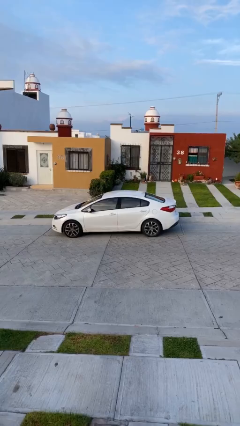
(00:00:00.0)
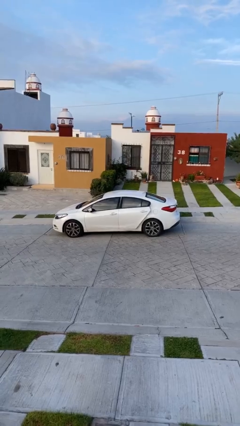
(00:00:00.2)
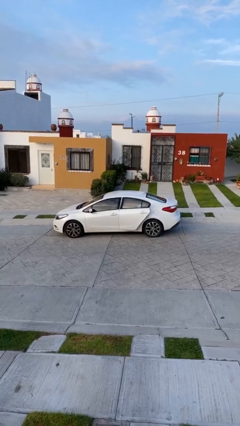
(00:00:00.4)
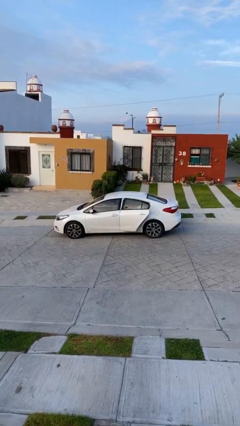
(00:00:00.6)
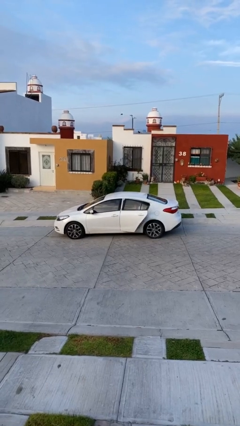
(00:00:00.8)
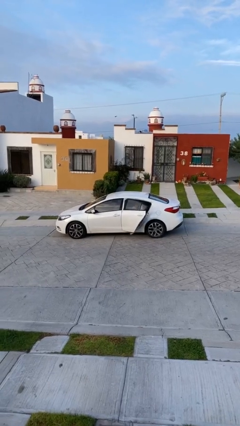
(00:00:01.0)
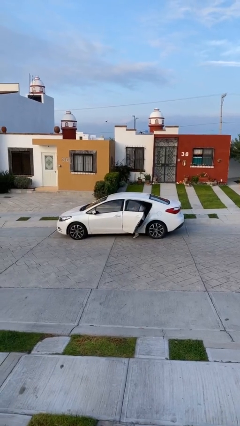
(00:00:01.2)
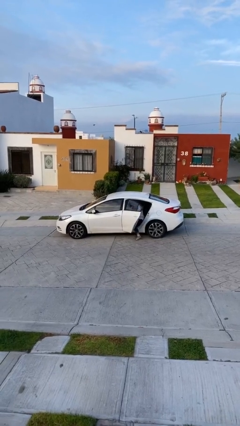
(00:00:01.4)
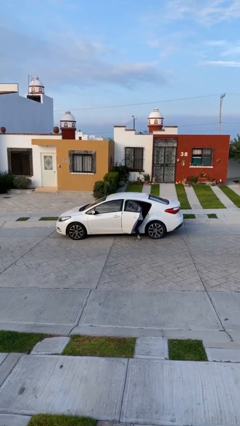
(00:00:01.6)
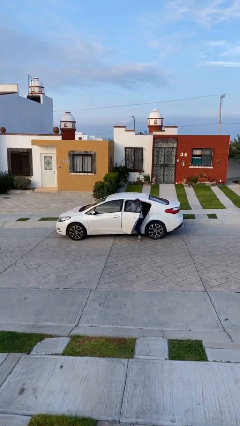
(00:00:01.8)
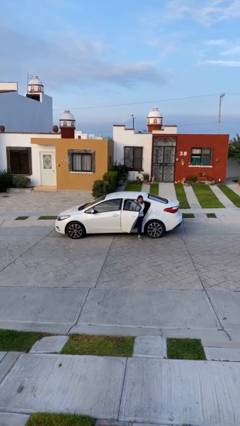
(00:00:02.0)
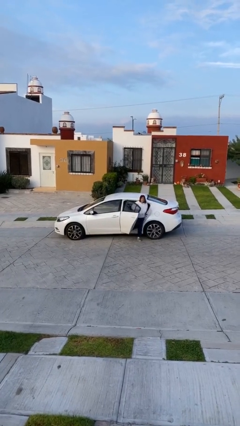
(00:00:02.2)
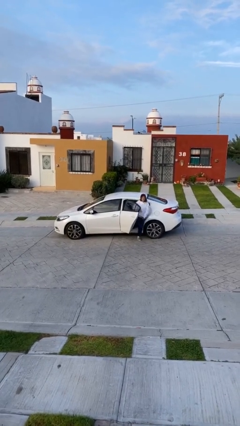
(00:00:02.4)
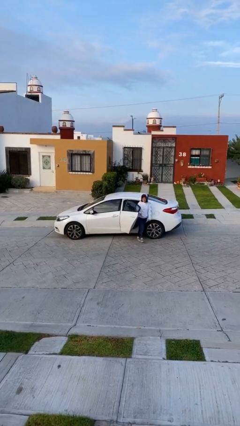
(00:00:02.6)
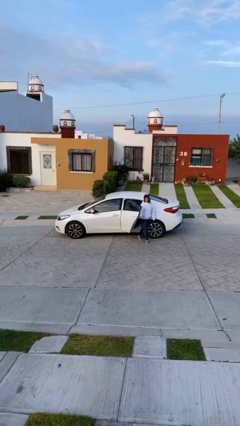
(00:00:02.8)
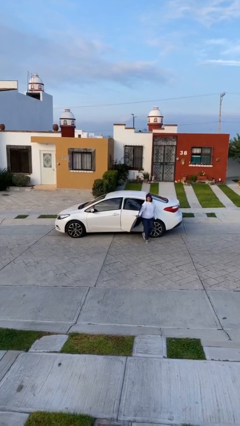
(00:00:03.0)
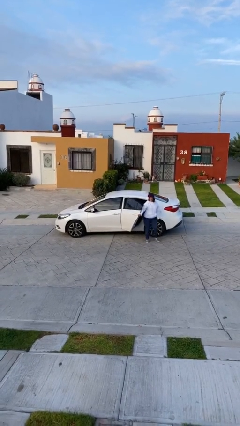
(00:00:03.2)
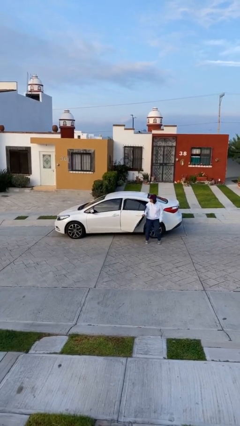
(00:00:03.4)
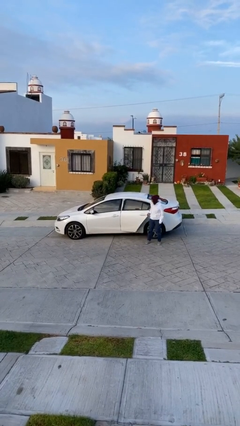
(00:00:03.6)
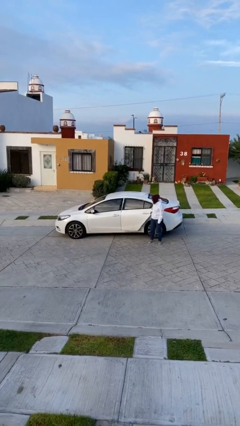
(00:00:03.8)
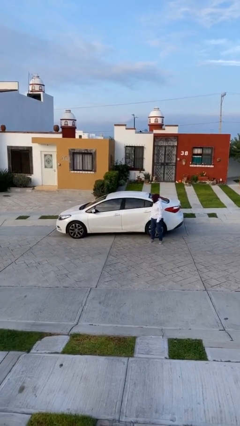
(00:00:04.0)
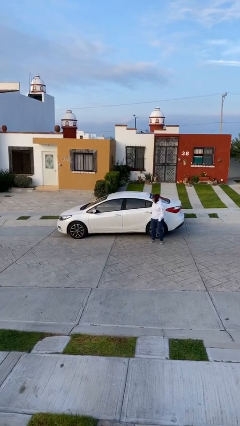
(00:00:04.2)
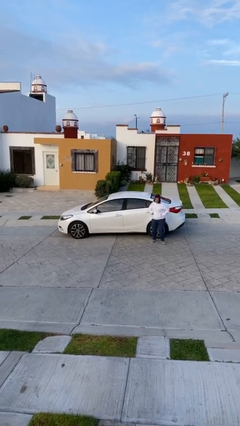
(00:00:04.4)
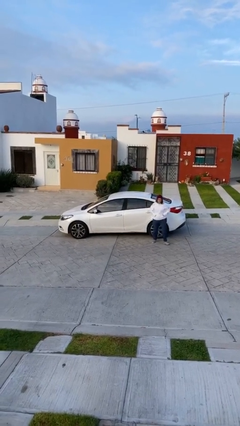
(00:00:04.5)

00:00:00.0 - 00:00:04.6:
car drops off person

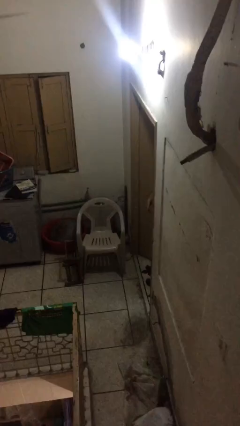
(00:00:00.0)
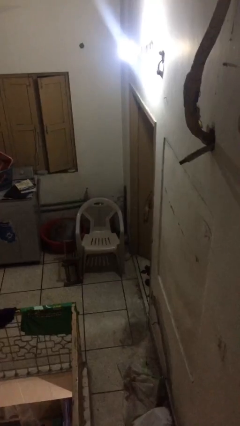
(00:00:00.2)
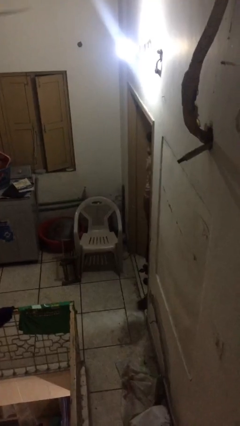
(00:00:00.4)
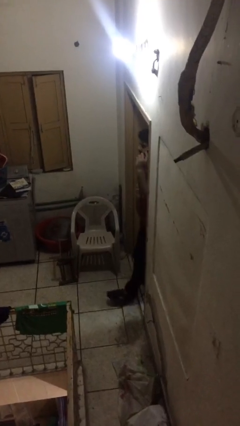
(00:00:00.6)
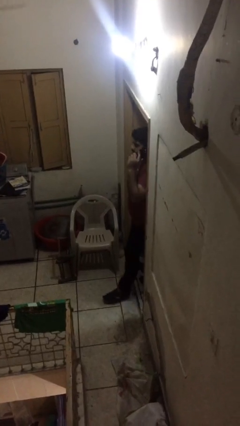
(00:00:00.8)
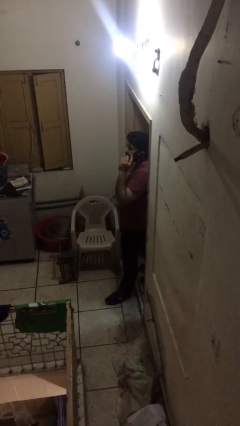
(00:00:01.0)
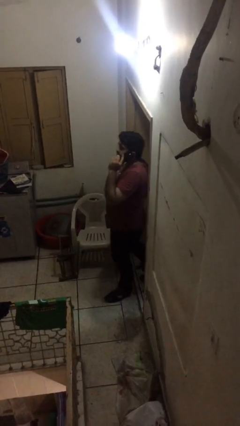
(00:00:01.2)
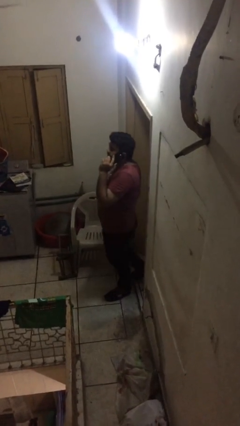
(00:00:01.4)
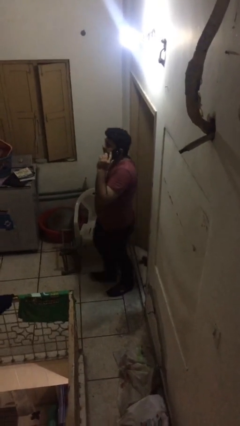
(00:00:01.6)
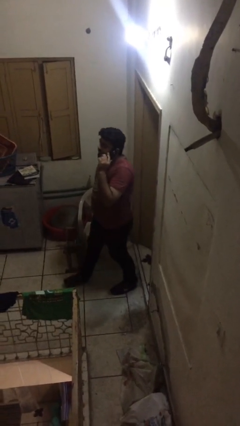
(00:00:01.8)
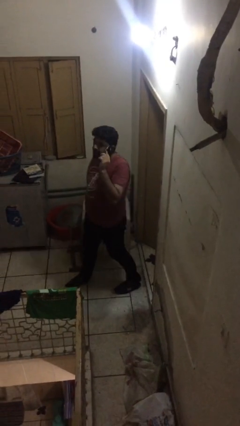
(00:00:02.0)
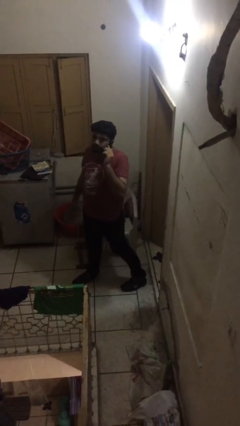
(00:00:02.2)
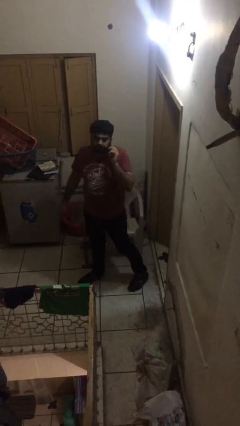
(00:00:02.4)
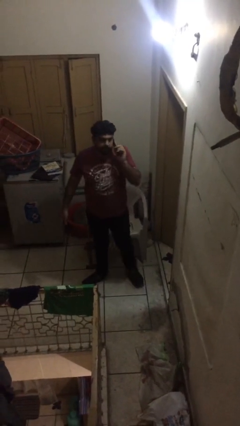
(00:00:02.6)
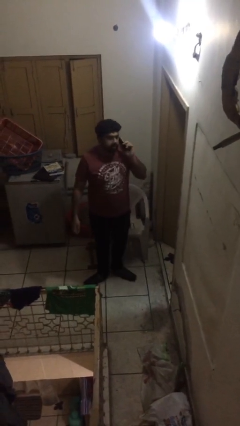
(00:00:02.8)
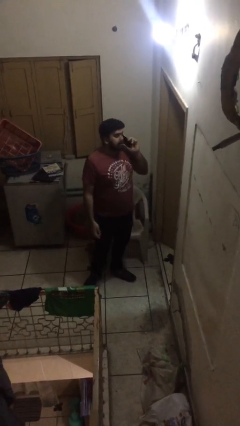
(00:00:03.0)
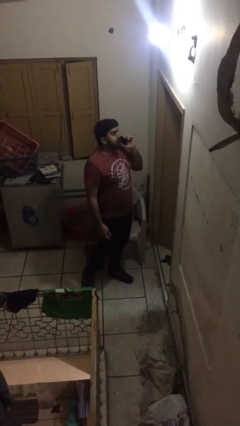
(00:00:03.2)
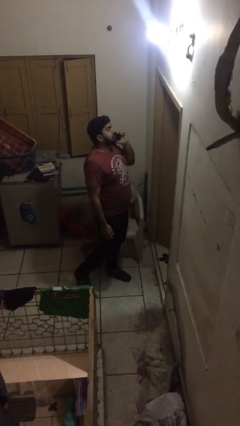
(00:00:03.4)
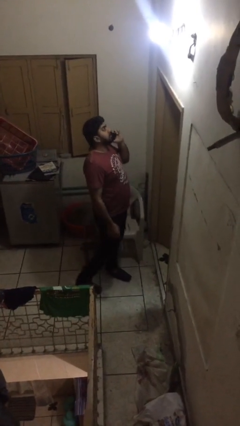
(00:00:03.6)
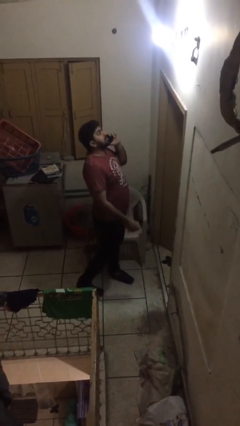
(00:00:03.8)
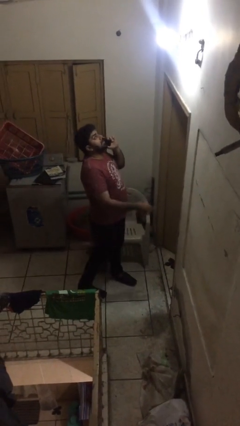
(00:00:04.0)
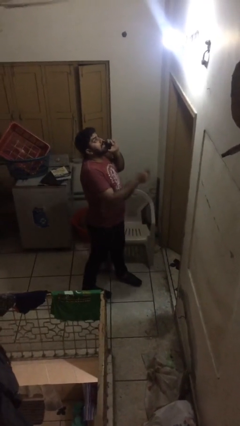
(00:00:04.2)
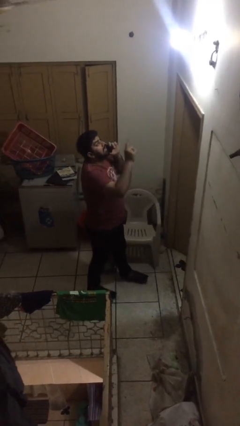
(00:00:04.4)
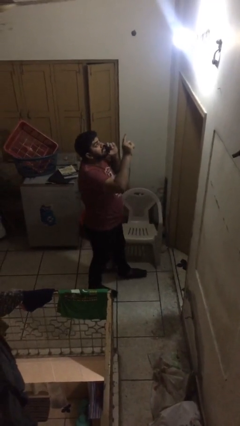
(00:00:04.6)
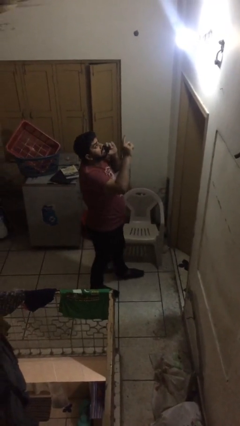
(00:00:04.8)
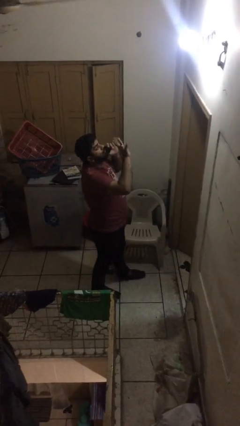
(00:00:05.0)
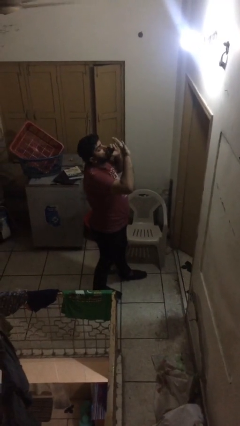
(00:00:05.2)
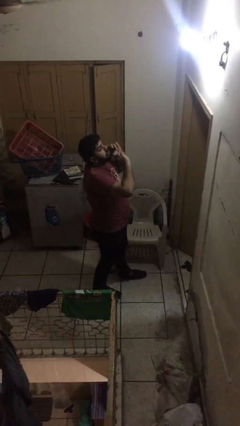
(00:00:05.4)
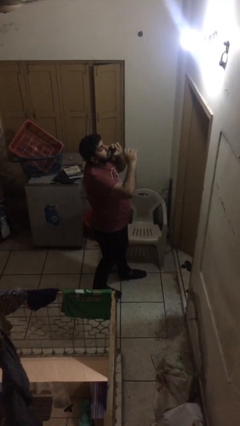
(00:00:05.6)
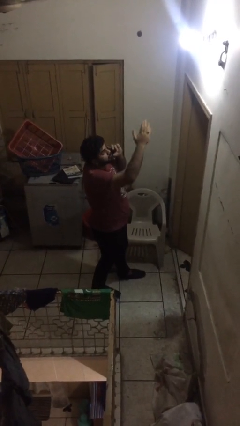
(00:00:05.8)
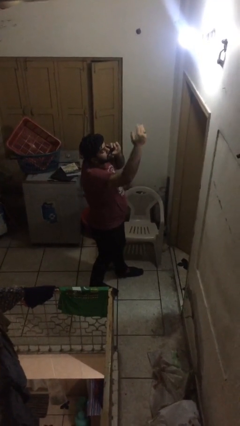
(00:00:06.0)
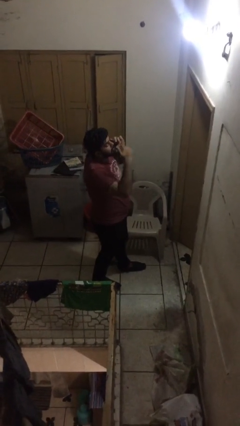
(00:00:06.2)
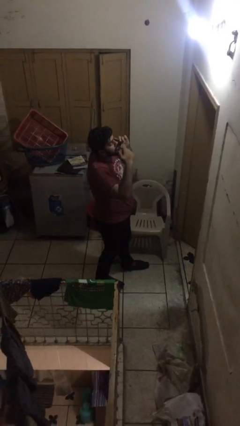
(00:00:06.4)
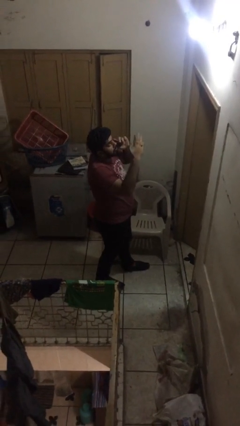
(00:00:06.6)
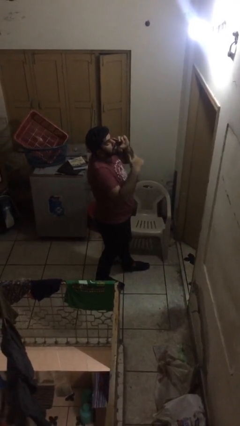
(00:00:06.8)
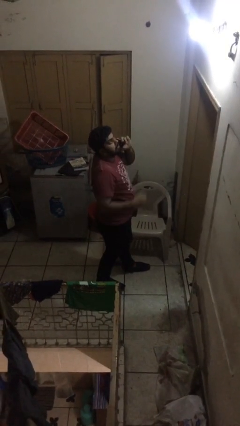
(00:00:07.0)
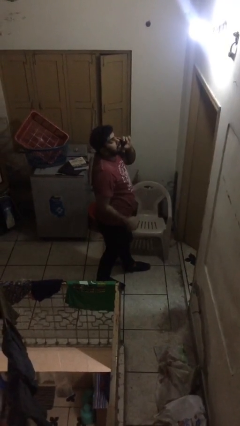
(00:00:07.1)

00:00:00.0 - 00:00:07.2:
person enters scene through structure

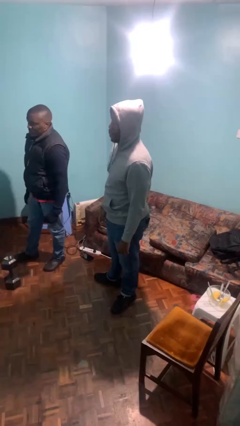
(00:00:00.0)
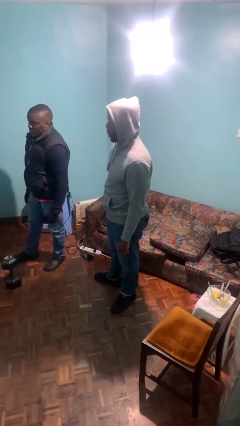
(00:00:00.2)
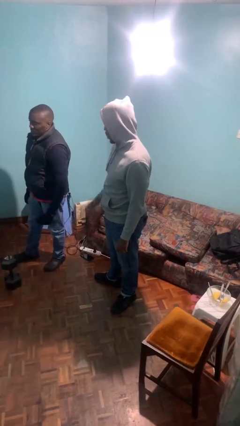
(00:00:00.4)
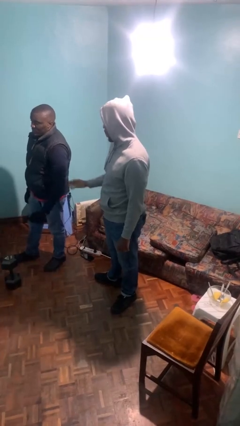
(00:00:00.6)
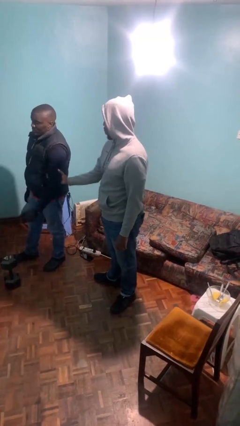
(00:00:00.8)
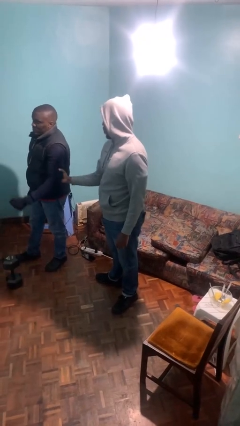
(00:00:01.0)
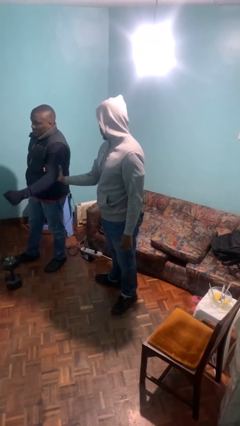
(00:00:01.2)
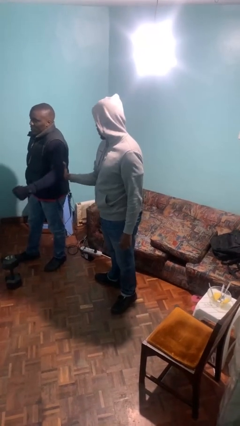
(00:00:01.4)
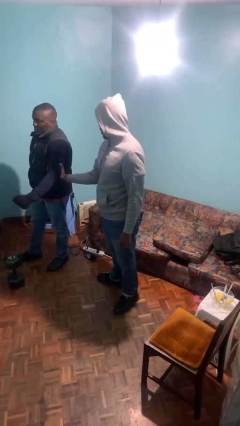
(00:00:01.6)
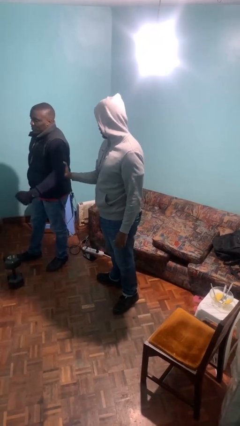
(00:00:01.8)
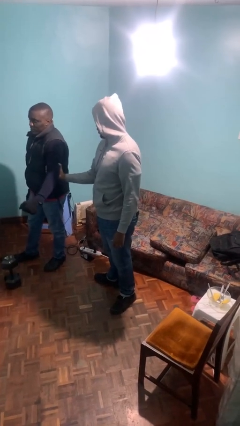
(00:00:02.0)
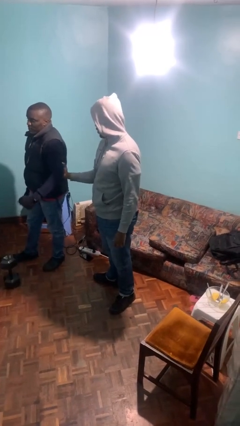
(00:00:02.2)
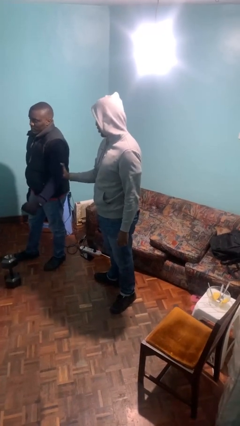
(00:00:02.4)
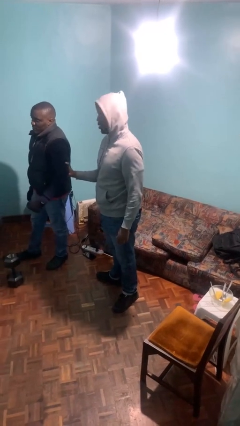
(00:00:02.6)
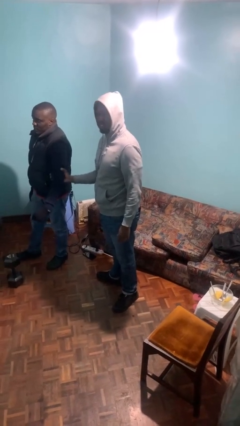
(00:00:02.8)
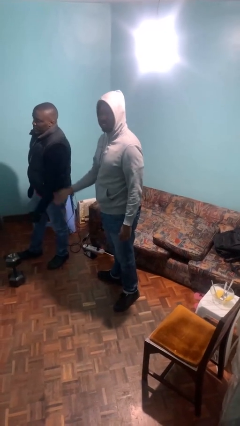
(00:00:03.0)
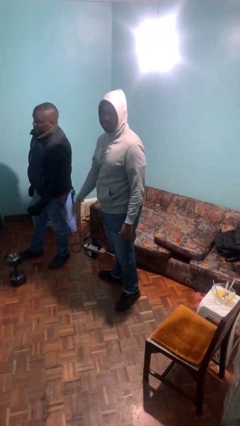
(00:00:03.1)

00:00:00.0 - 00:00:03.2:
person grabs person by bicep

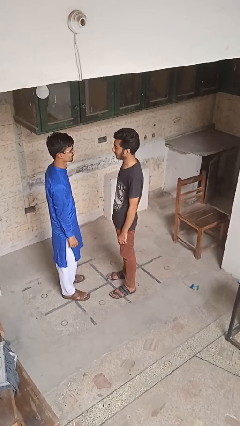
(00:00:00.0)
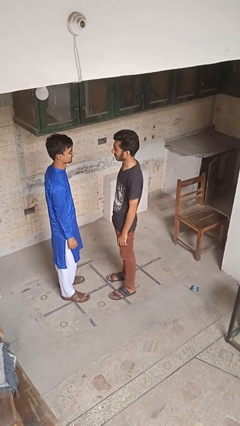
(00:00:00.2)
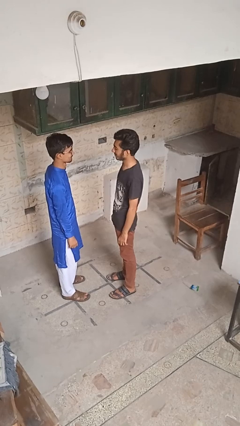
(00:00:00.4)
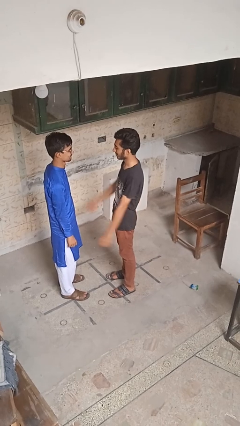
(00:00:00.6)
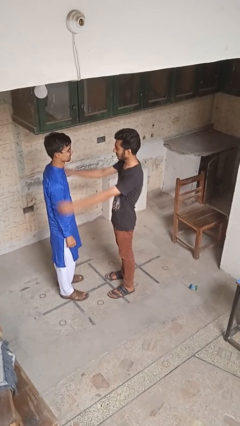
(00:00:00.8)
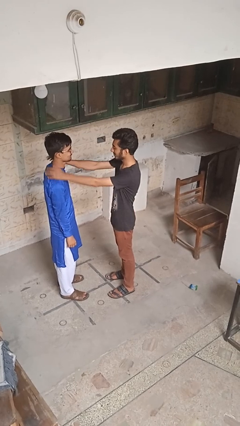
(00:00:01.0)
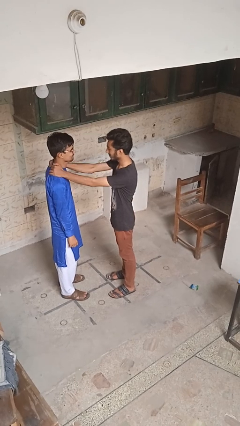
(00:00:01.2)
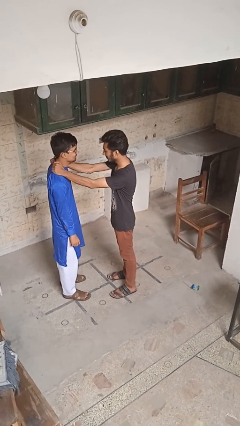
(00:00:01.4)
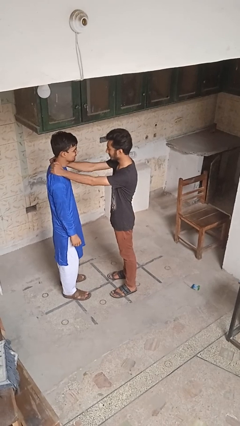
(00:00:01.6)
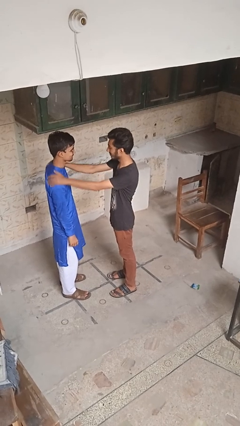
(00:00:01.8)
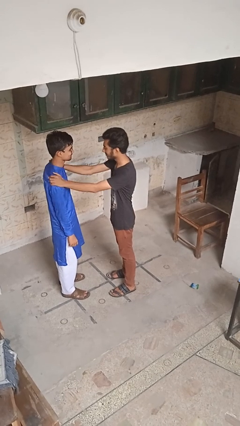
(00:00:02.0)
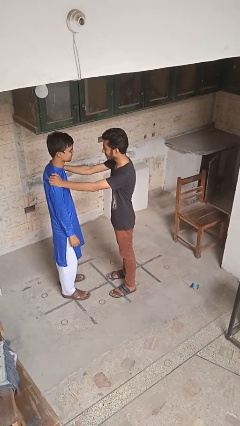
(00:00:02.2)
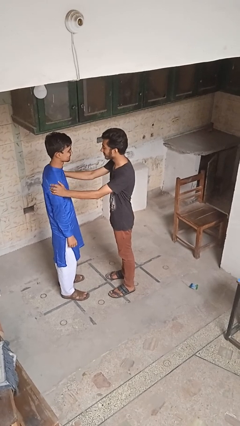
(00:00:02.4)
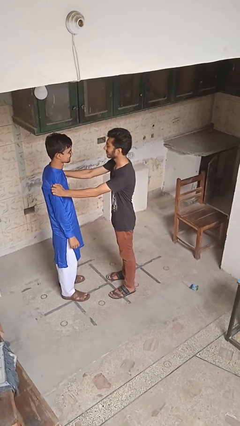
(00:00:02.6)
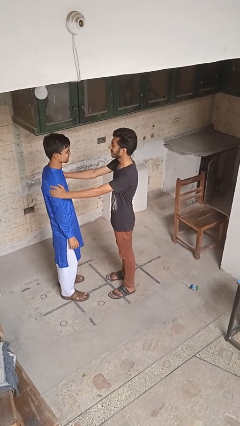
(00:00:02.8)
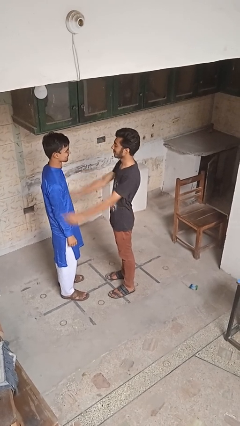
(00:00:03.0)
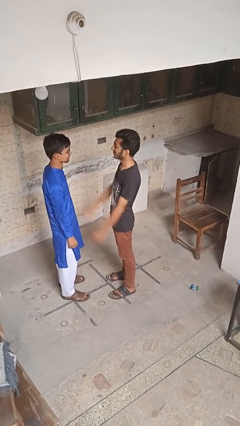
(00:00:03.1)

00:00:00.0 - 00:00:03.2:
person pounds shoulders of person
